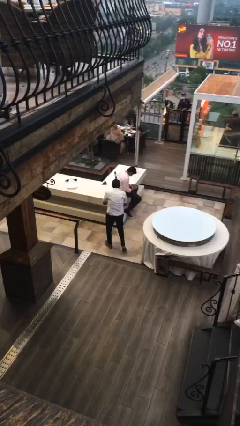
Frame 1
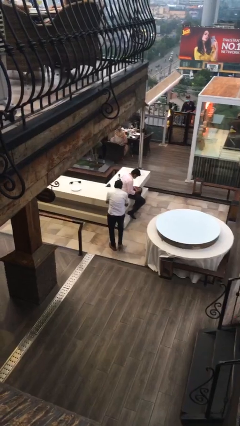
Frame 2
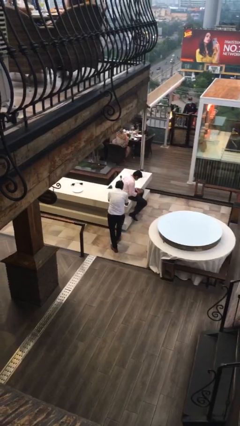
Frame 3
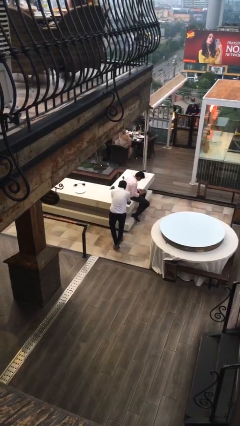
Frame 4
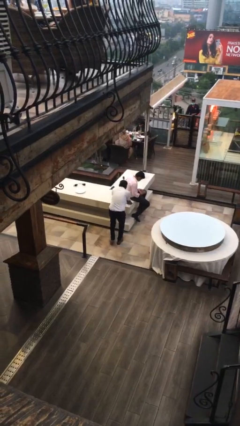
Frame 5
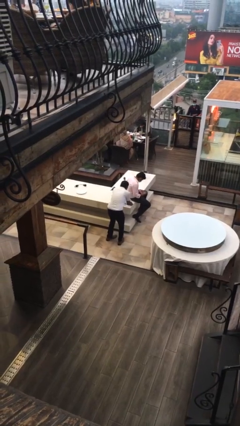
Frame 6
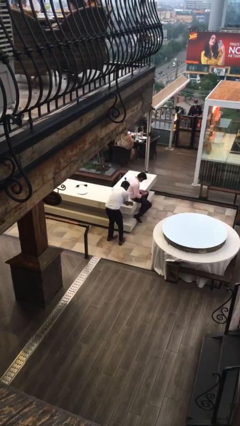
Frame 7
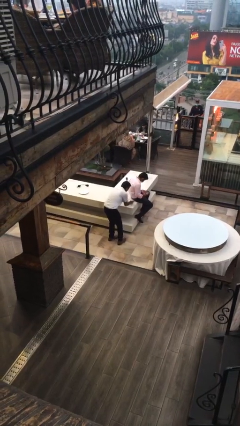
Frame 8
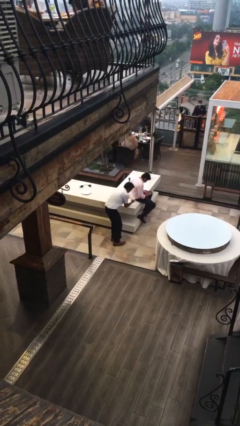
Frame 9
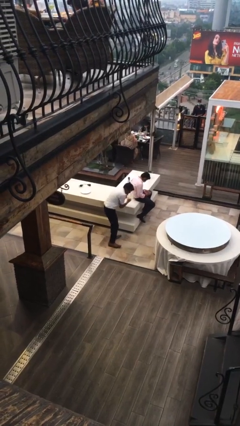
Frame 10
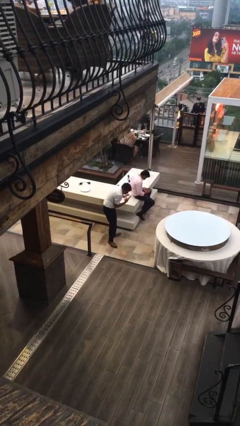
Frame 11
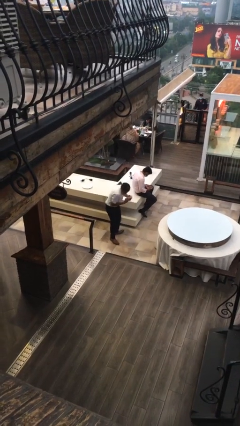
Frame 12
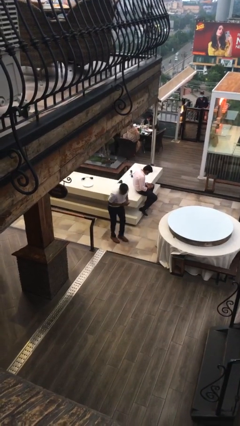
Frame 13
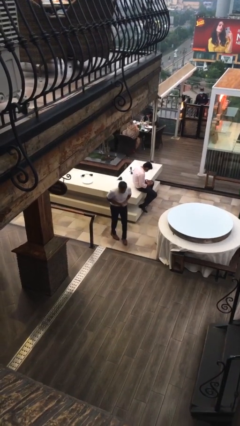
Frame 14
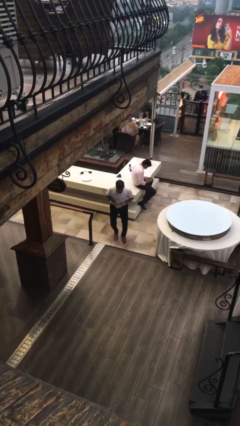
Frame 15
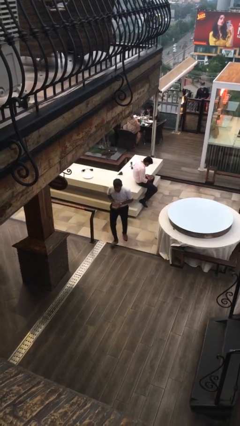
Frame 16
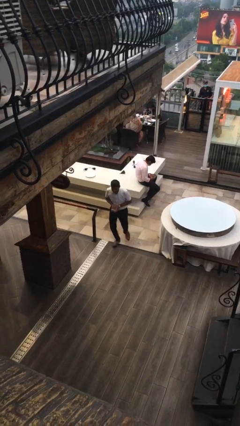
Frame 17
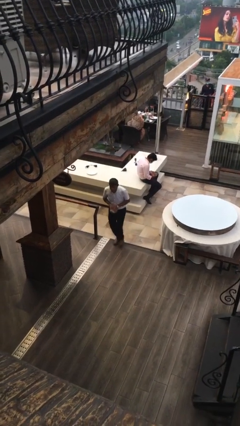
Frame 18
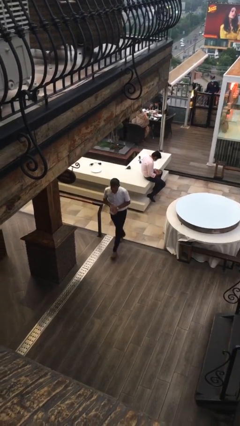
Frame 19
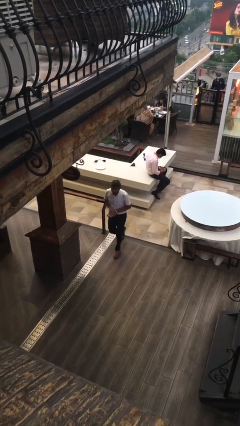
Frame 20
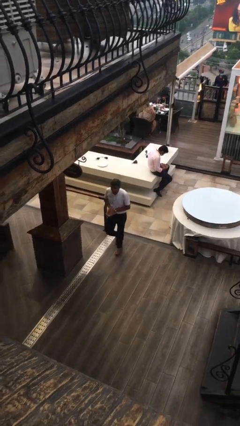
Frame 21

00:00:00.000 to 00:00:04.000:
person steals object from person

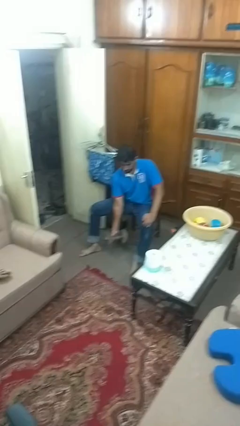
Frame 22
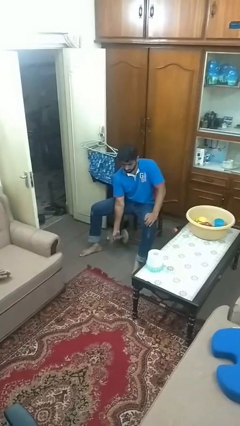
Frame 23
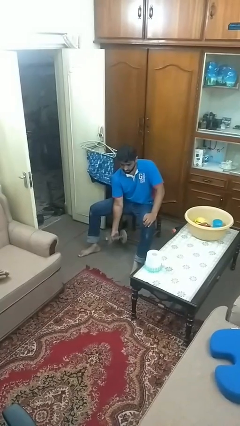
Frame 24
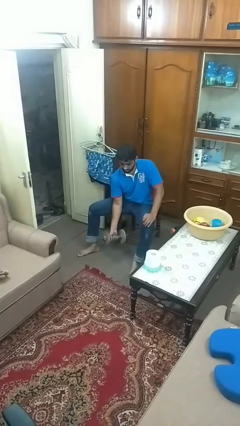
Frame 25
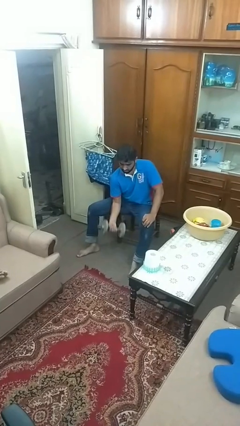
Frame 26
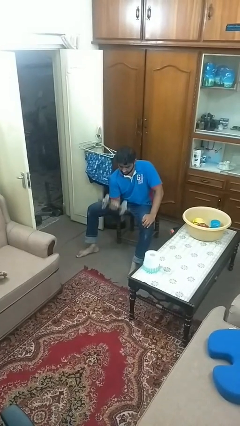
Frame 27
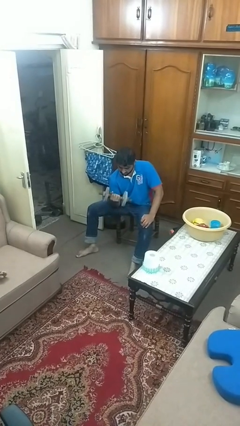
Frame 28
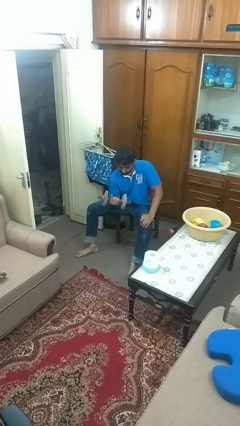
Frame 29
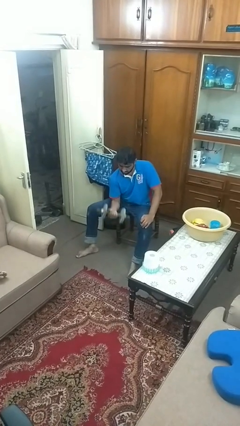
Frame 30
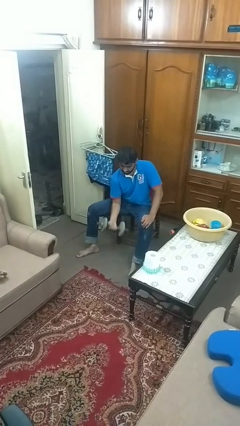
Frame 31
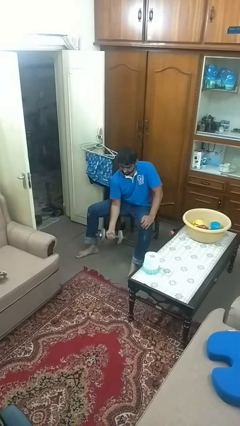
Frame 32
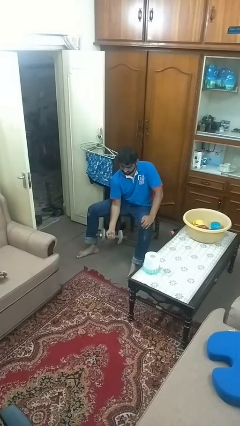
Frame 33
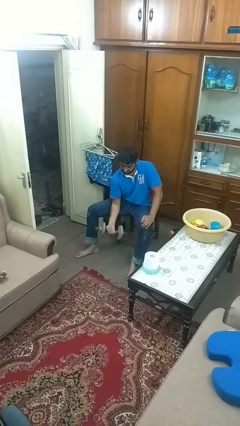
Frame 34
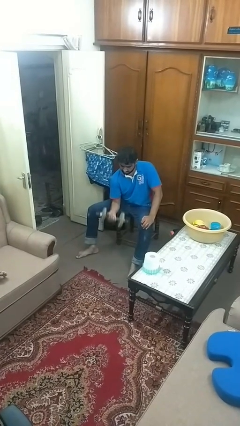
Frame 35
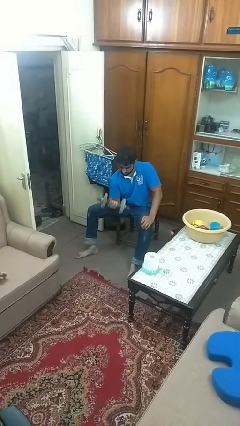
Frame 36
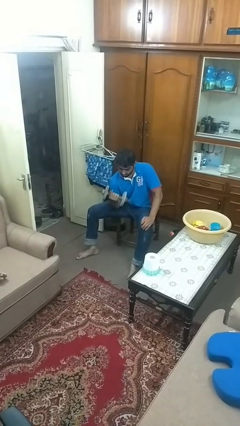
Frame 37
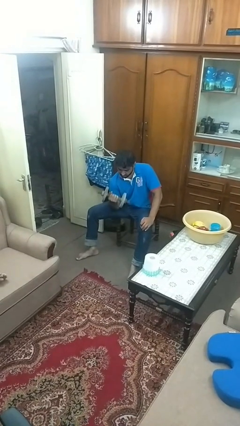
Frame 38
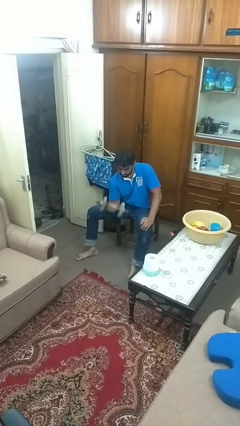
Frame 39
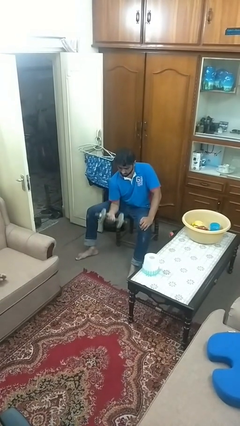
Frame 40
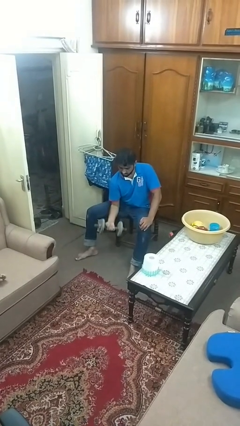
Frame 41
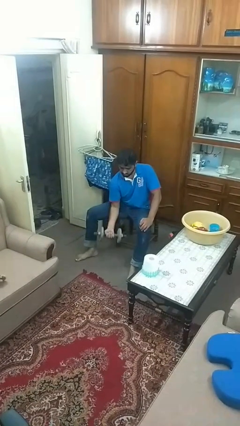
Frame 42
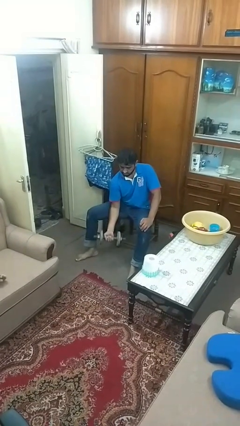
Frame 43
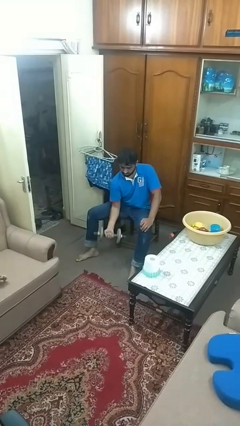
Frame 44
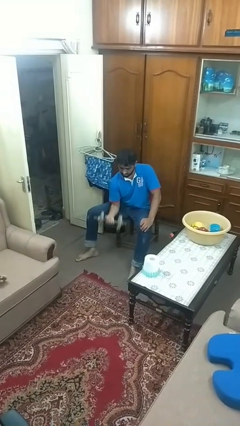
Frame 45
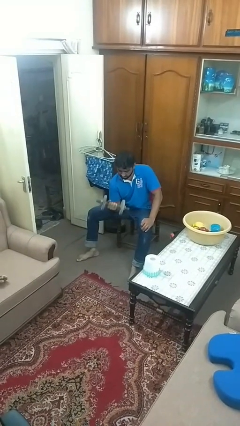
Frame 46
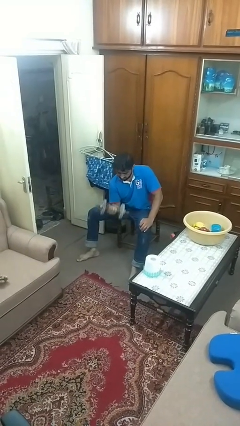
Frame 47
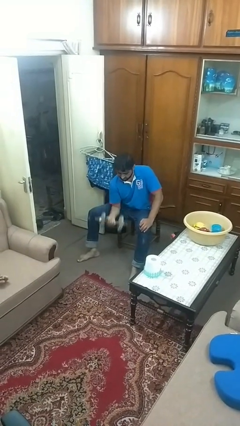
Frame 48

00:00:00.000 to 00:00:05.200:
person lifts dumbbells

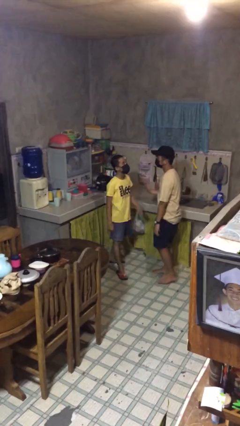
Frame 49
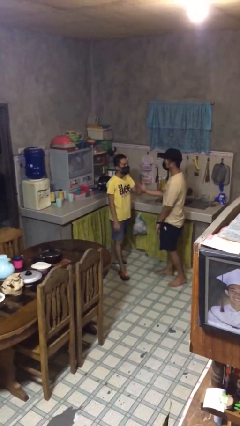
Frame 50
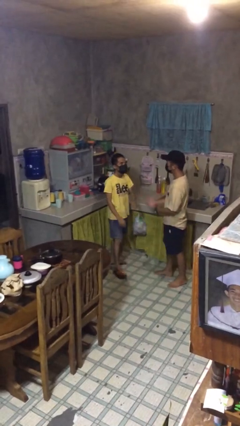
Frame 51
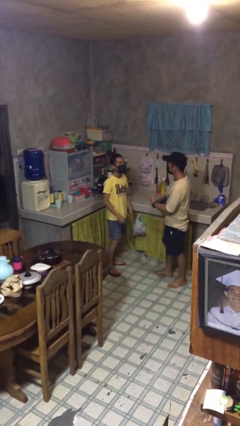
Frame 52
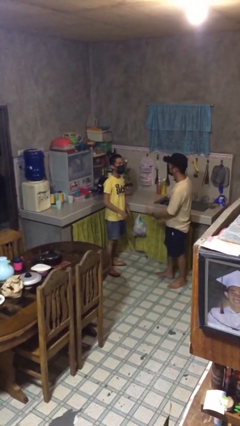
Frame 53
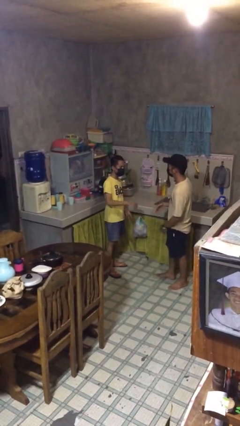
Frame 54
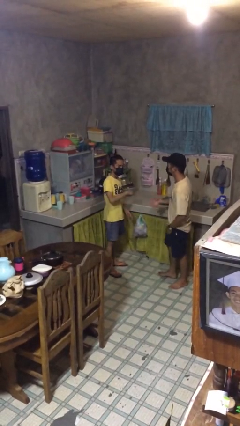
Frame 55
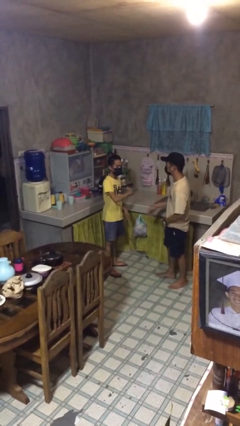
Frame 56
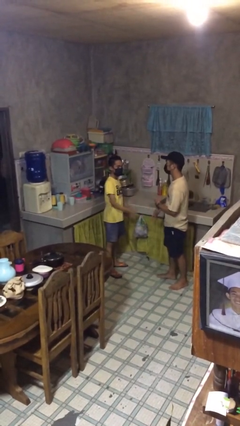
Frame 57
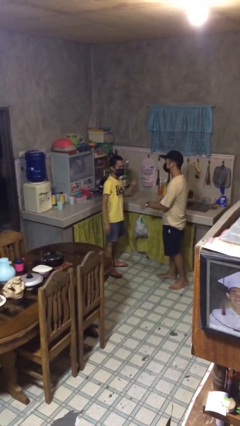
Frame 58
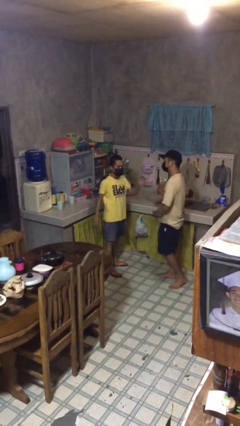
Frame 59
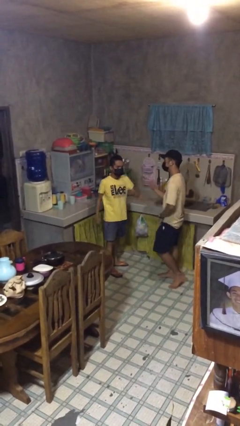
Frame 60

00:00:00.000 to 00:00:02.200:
person talks to person

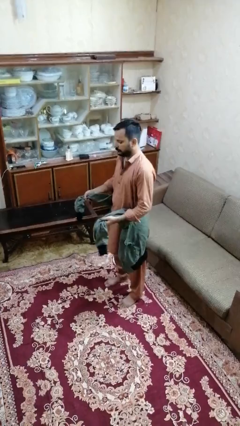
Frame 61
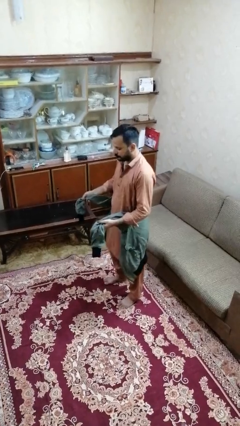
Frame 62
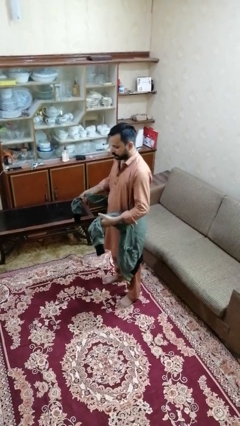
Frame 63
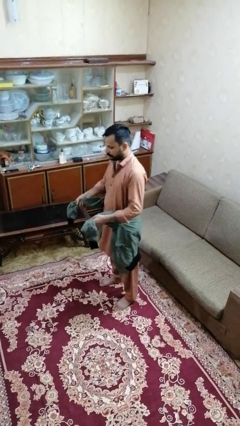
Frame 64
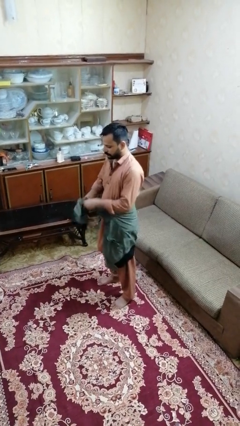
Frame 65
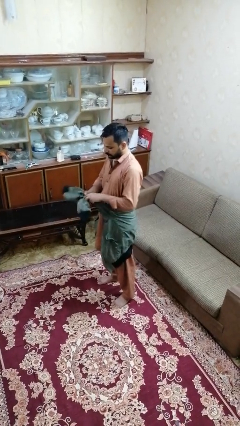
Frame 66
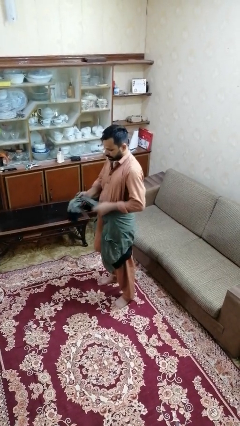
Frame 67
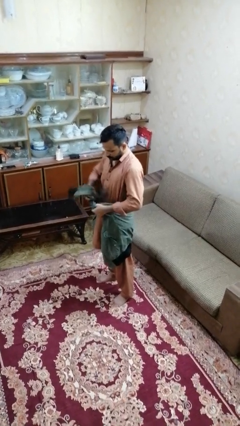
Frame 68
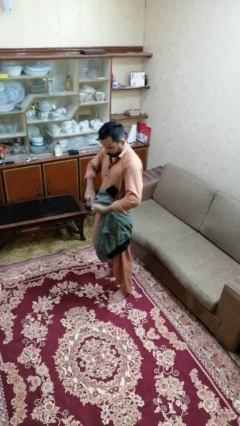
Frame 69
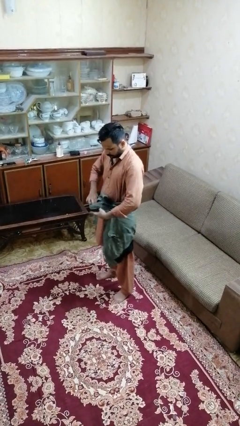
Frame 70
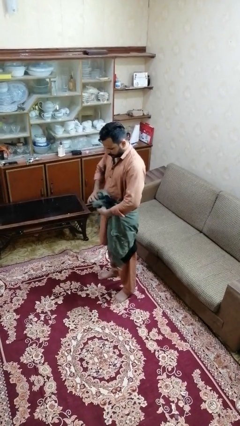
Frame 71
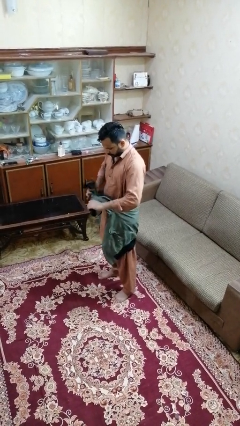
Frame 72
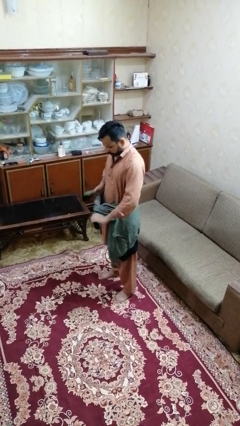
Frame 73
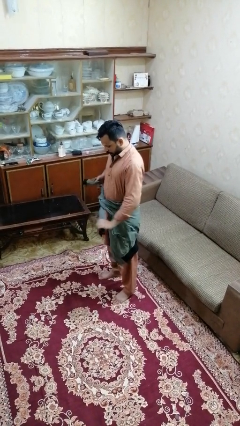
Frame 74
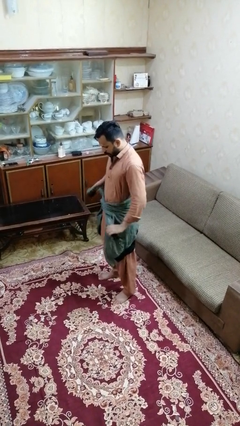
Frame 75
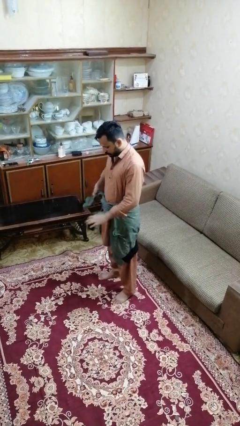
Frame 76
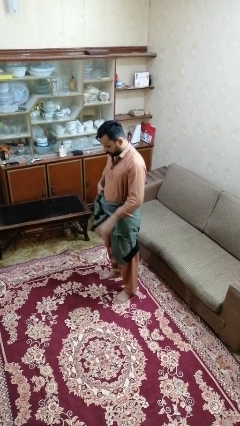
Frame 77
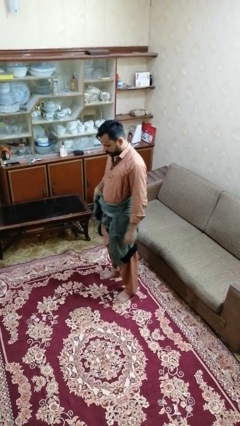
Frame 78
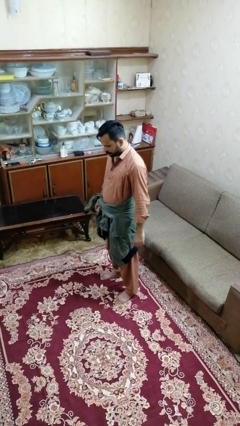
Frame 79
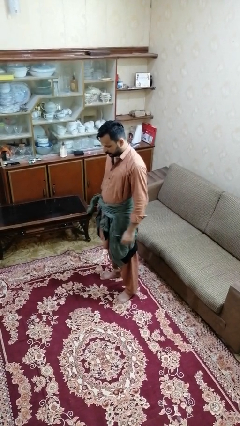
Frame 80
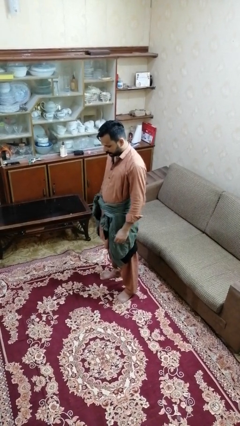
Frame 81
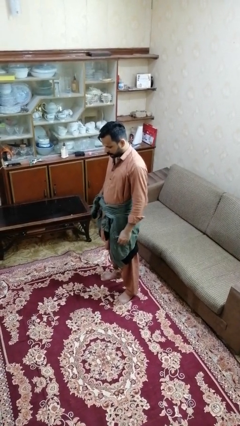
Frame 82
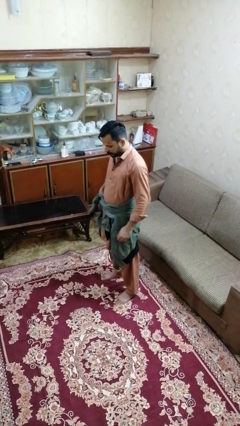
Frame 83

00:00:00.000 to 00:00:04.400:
person ties jacket around waist

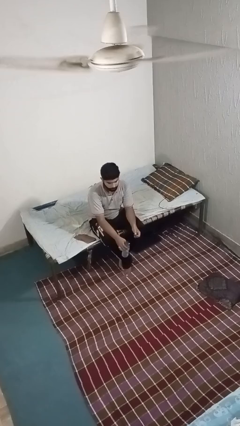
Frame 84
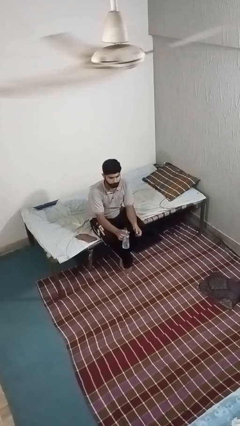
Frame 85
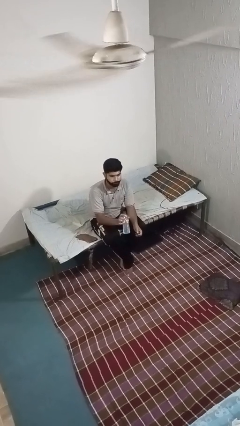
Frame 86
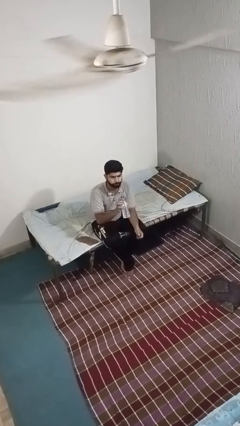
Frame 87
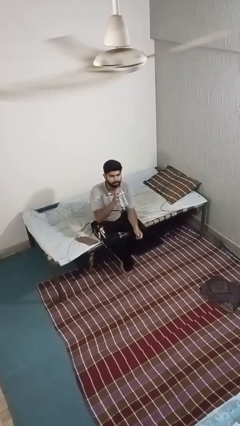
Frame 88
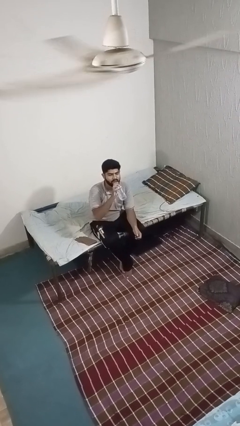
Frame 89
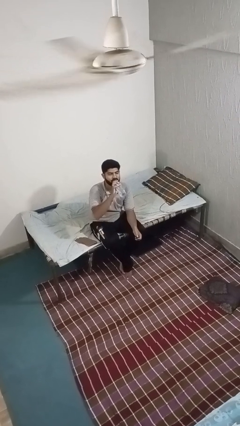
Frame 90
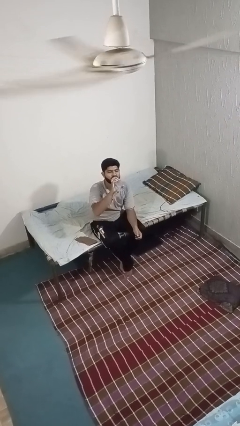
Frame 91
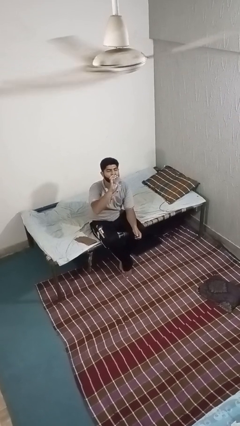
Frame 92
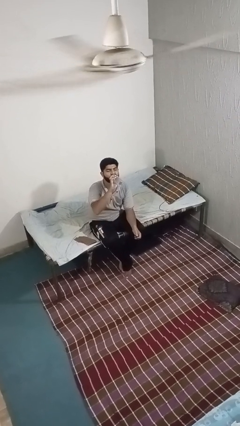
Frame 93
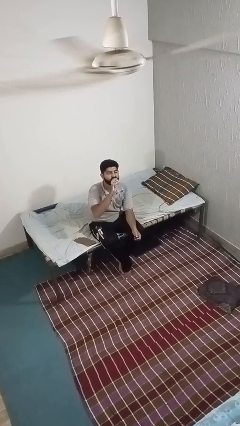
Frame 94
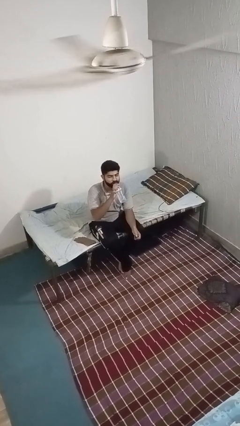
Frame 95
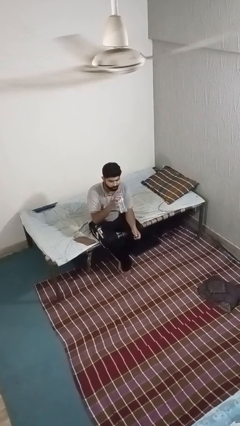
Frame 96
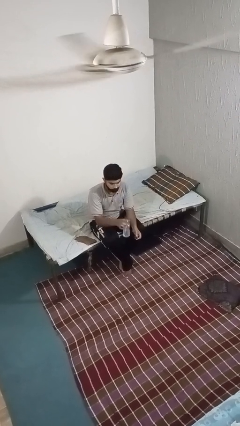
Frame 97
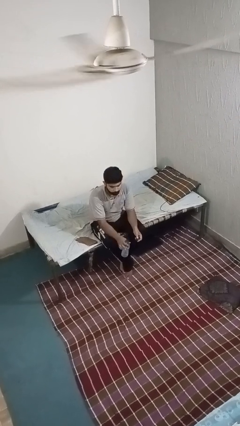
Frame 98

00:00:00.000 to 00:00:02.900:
person drinks from bottle
